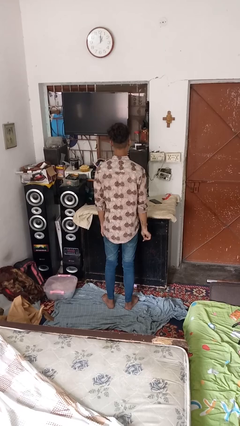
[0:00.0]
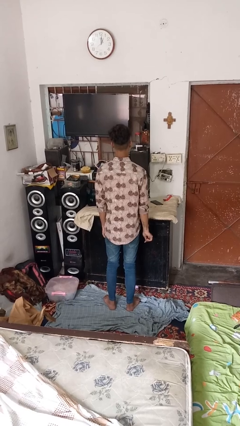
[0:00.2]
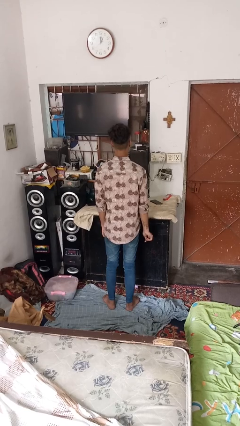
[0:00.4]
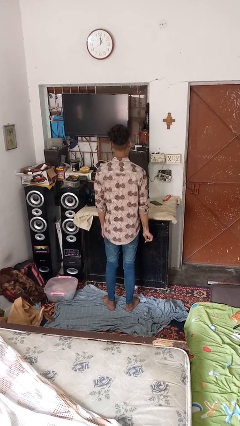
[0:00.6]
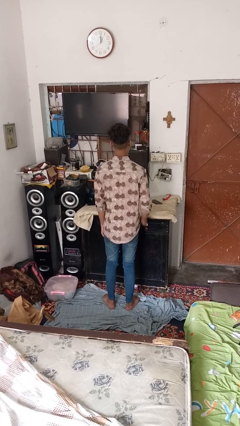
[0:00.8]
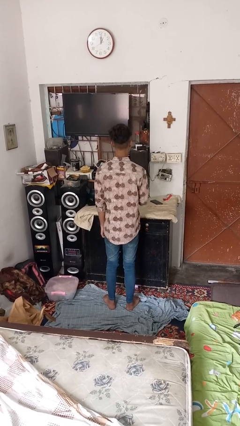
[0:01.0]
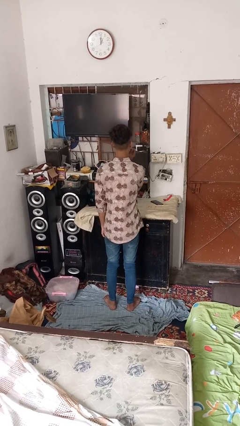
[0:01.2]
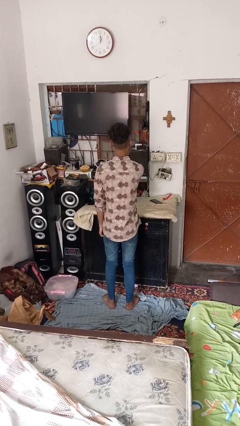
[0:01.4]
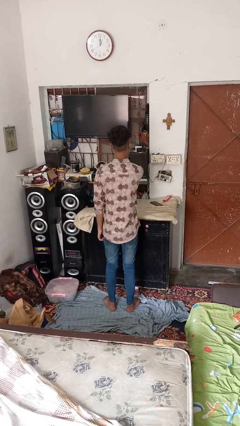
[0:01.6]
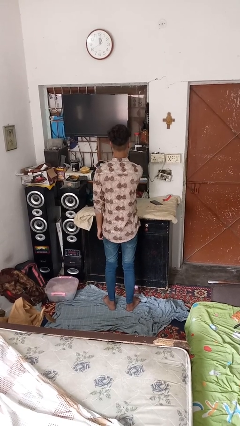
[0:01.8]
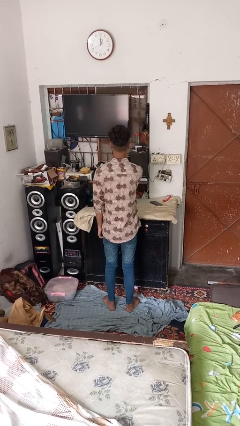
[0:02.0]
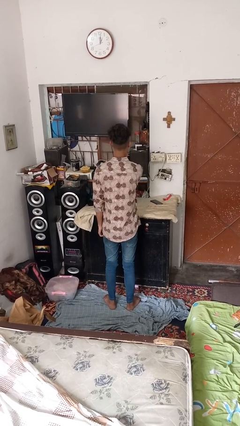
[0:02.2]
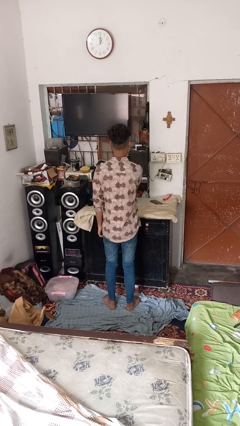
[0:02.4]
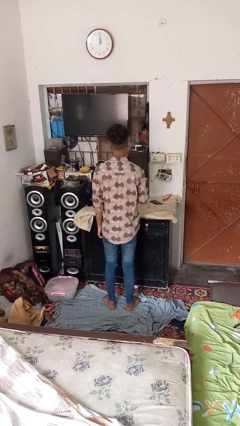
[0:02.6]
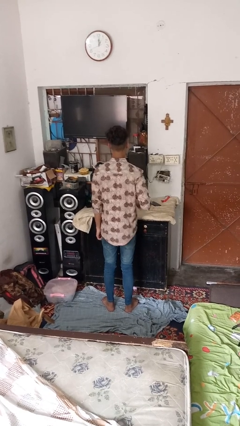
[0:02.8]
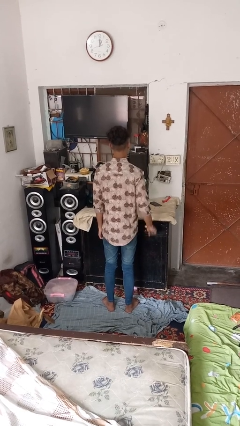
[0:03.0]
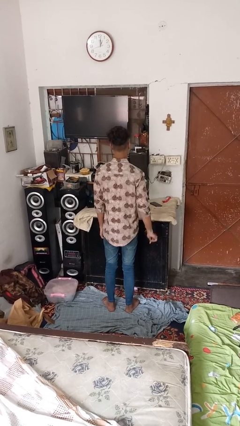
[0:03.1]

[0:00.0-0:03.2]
person applies lip makeup

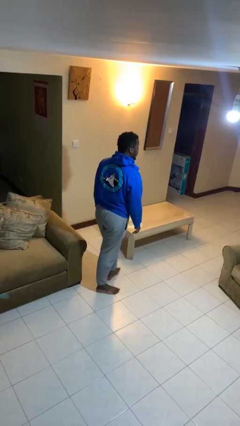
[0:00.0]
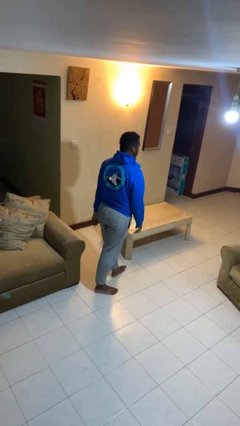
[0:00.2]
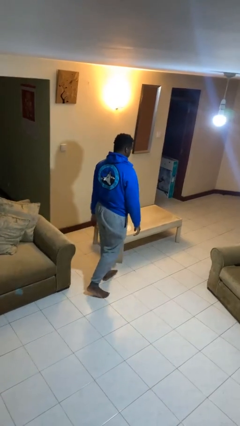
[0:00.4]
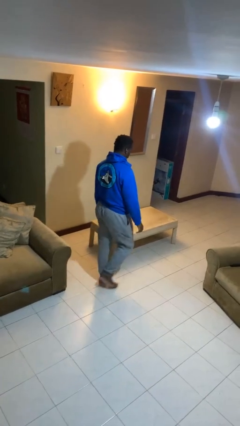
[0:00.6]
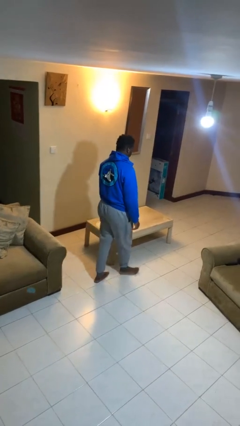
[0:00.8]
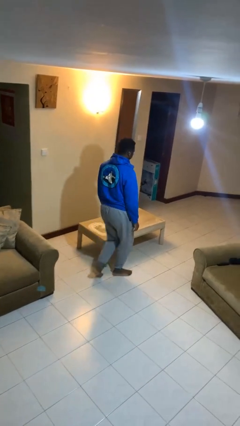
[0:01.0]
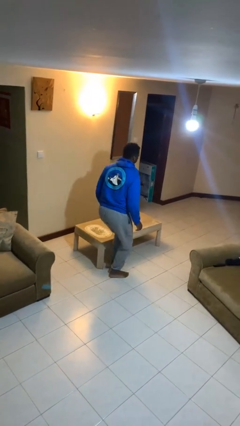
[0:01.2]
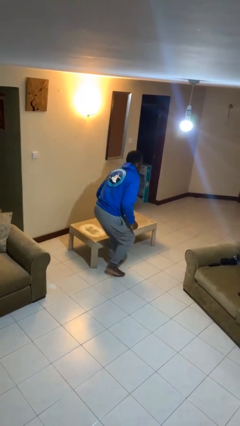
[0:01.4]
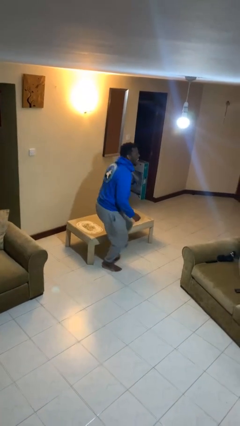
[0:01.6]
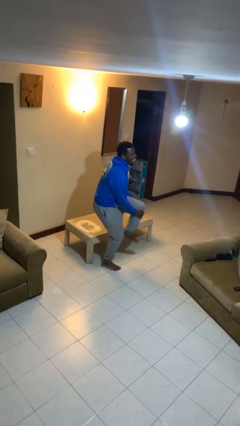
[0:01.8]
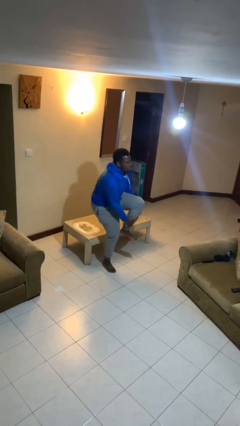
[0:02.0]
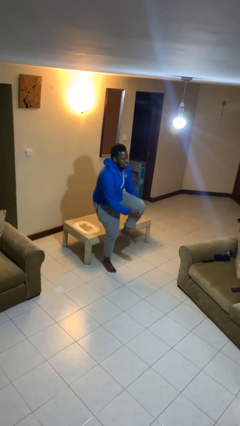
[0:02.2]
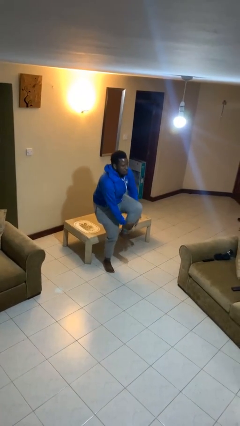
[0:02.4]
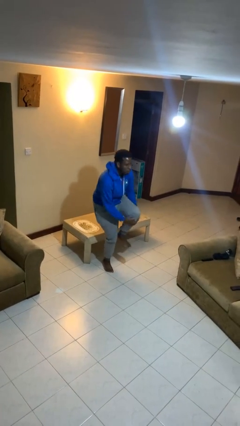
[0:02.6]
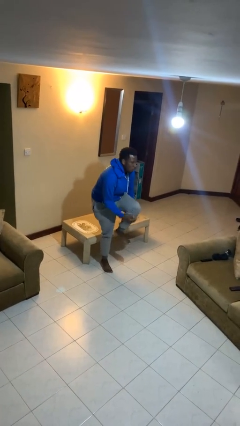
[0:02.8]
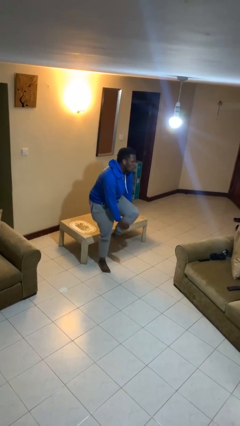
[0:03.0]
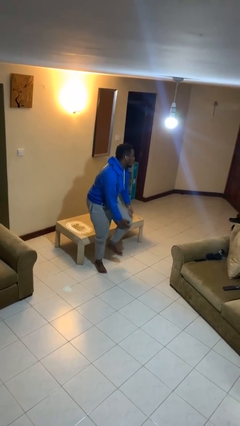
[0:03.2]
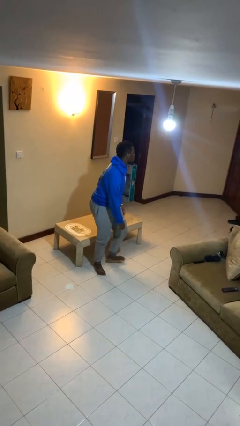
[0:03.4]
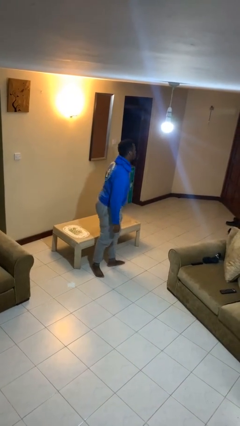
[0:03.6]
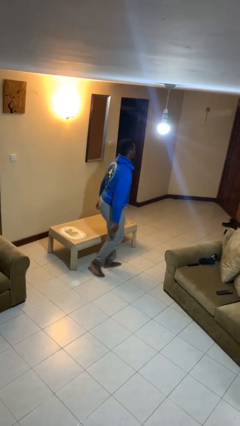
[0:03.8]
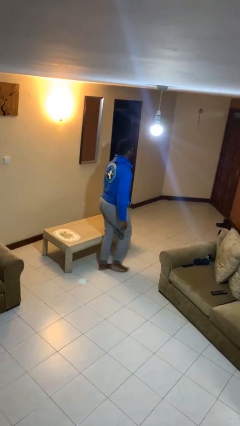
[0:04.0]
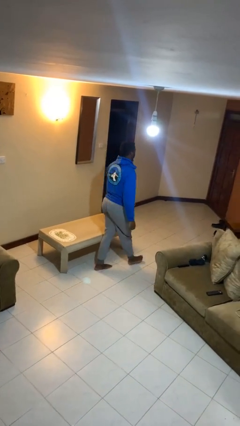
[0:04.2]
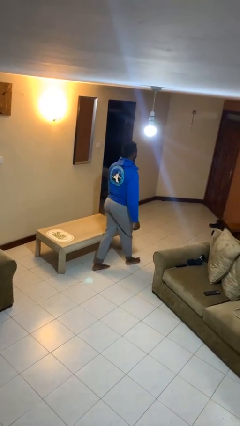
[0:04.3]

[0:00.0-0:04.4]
person bumps into table

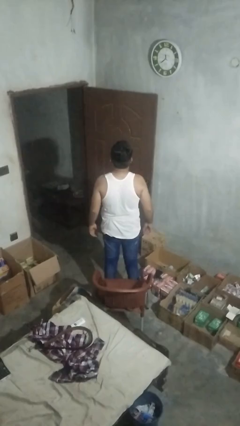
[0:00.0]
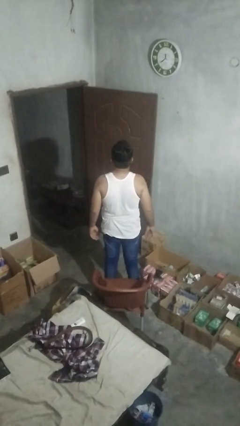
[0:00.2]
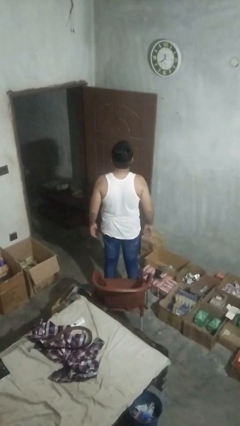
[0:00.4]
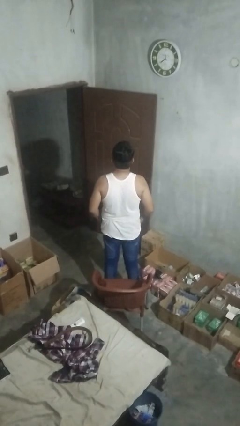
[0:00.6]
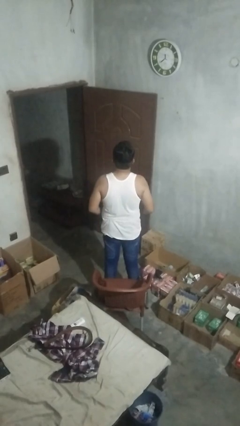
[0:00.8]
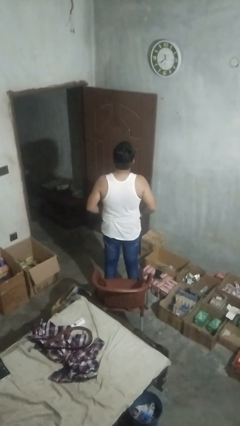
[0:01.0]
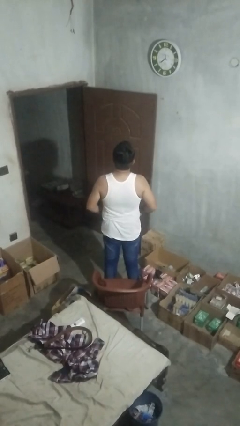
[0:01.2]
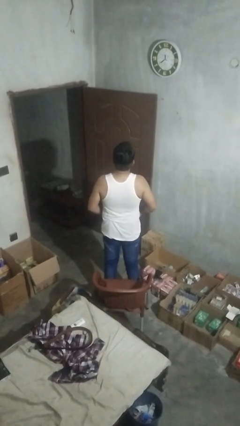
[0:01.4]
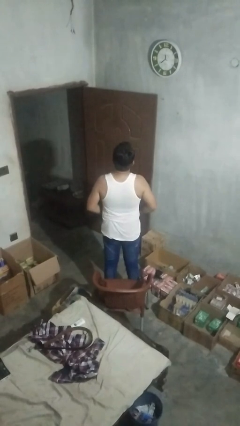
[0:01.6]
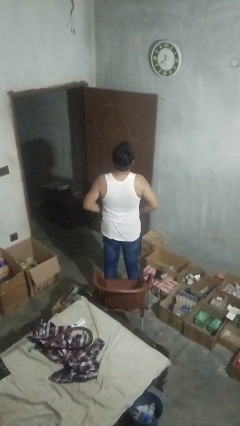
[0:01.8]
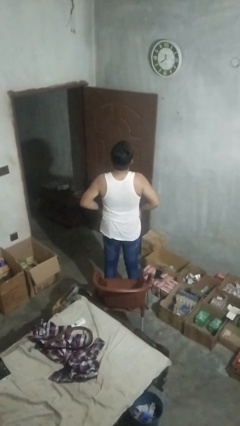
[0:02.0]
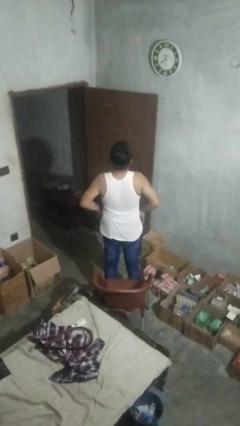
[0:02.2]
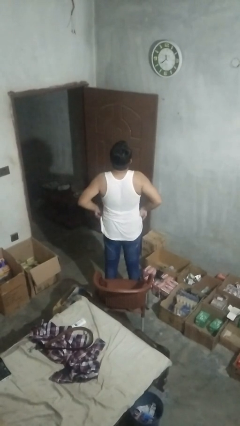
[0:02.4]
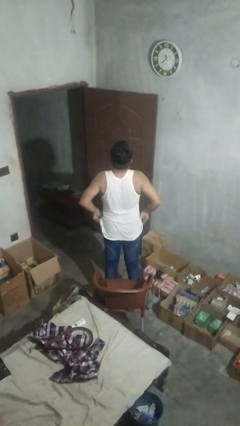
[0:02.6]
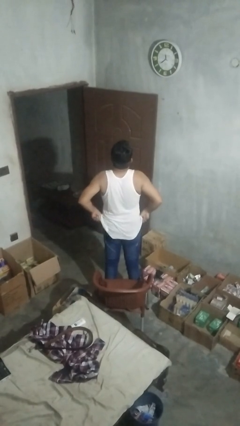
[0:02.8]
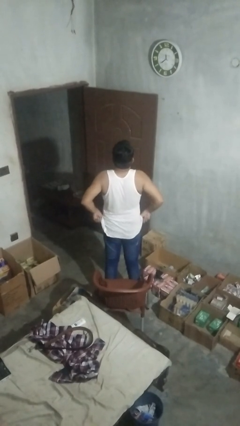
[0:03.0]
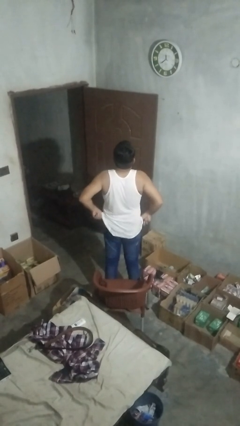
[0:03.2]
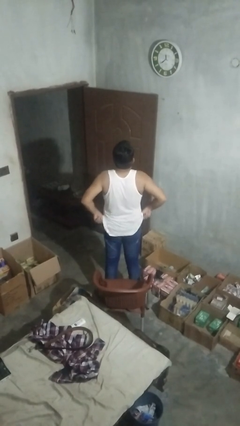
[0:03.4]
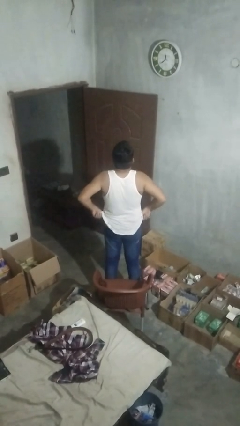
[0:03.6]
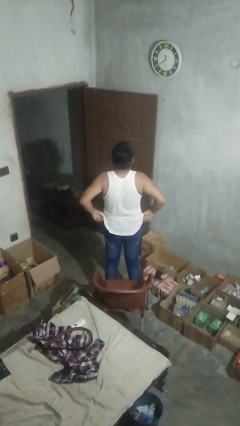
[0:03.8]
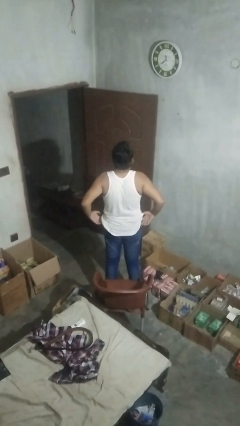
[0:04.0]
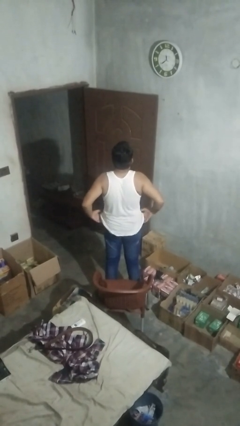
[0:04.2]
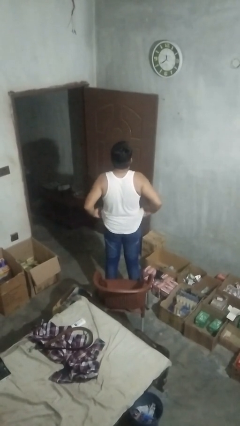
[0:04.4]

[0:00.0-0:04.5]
person hikes up pants

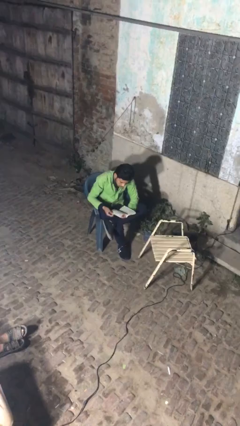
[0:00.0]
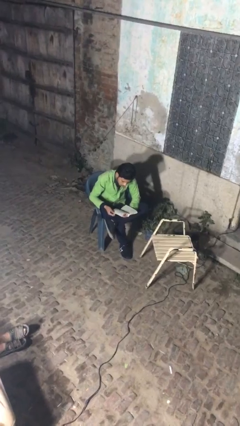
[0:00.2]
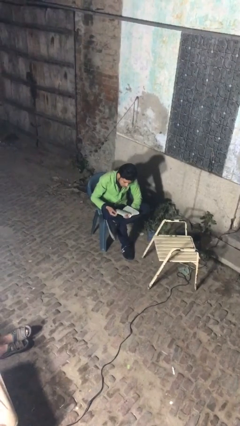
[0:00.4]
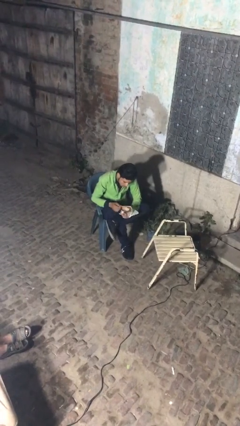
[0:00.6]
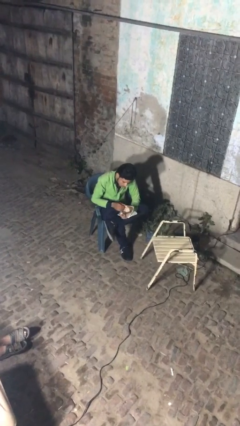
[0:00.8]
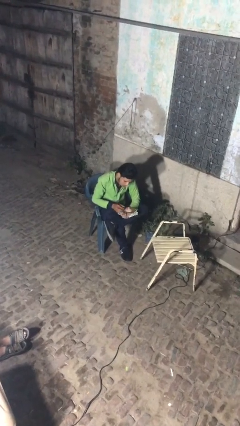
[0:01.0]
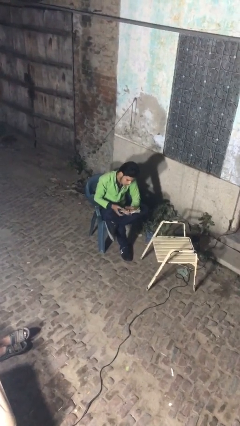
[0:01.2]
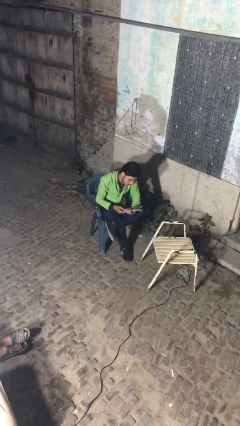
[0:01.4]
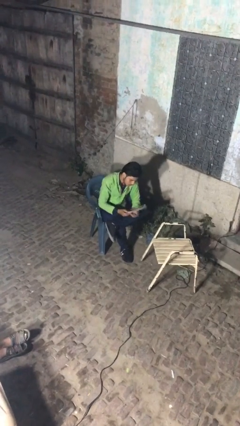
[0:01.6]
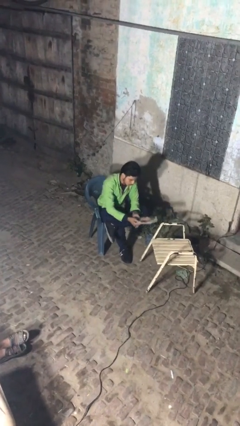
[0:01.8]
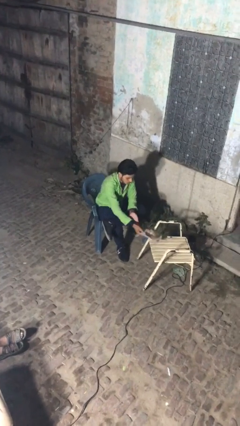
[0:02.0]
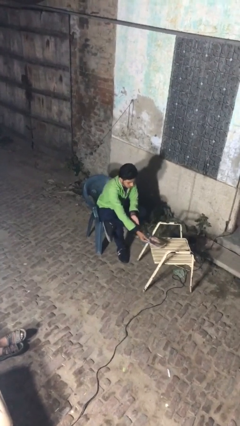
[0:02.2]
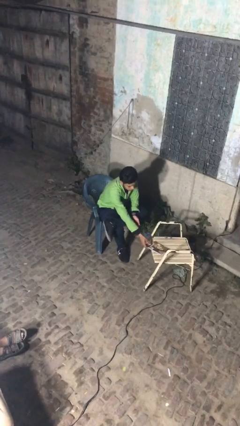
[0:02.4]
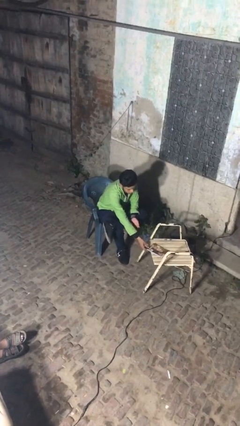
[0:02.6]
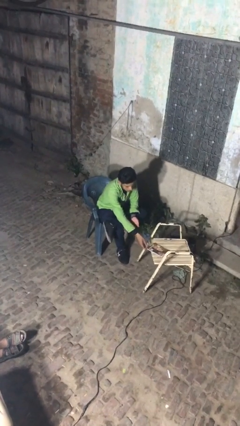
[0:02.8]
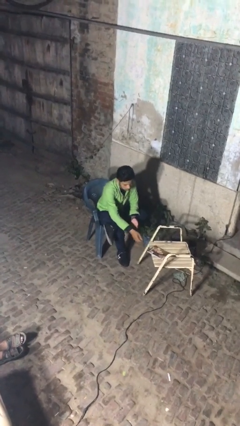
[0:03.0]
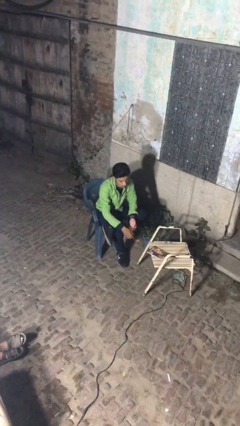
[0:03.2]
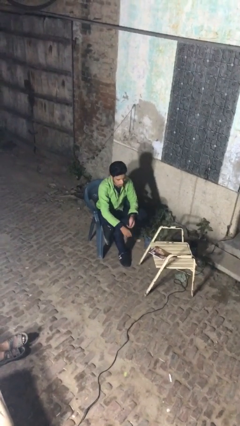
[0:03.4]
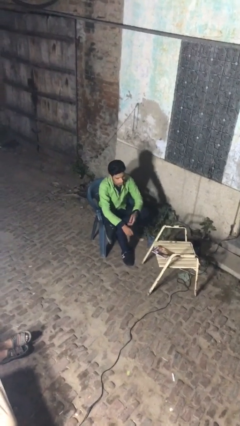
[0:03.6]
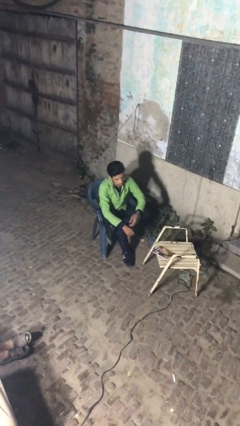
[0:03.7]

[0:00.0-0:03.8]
person puts down object on table

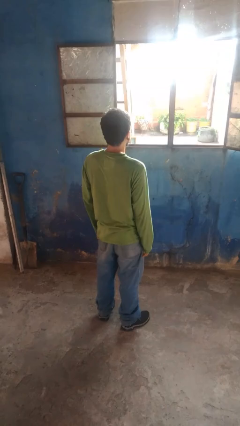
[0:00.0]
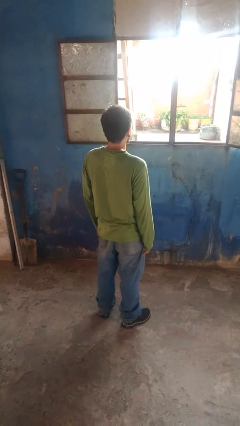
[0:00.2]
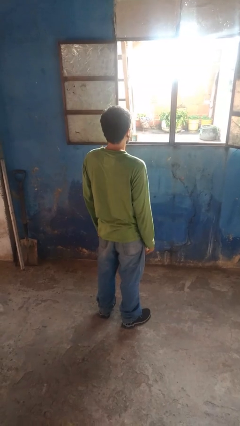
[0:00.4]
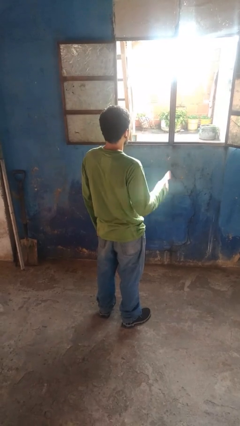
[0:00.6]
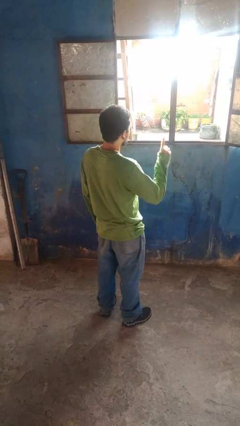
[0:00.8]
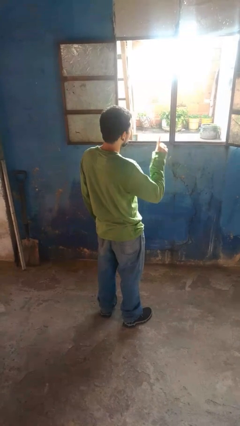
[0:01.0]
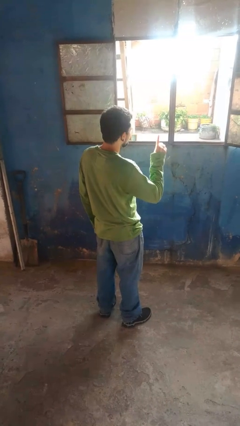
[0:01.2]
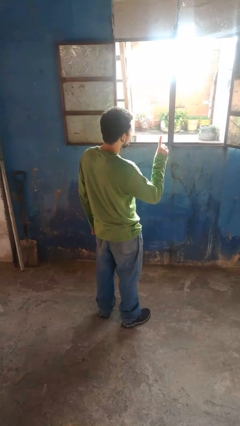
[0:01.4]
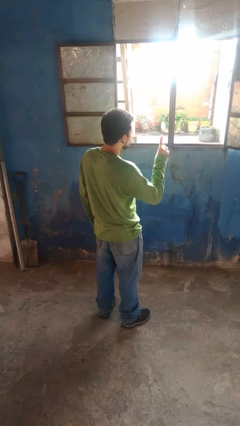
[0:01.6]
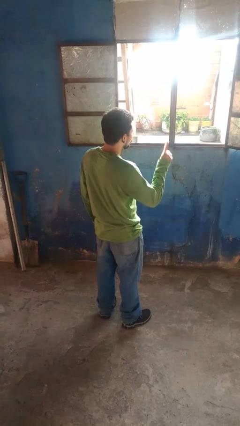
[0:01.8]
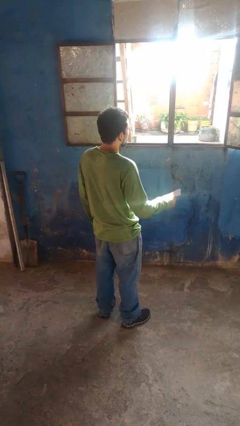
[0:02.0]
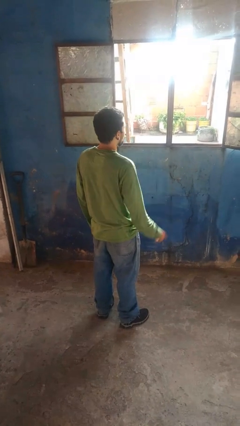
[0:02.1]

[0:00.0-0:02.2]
person gestures number one
